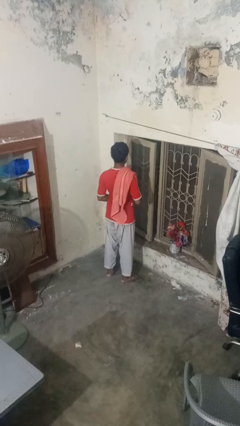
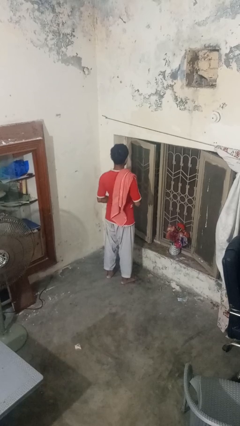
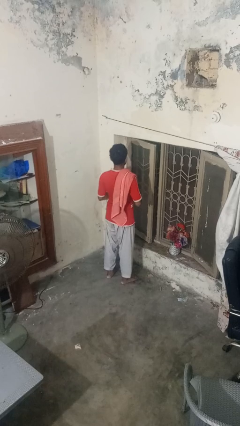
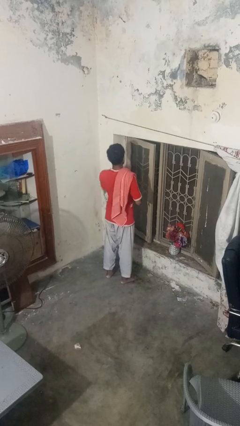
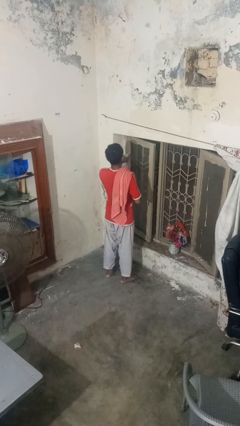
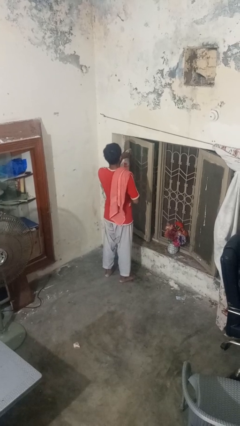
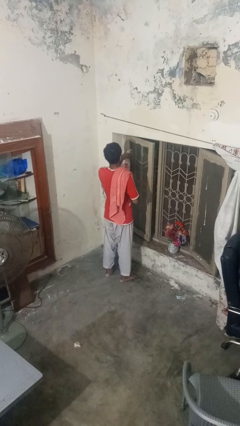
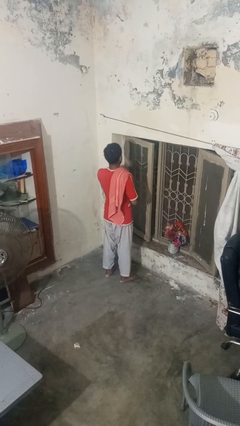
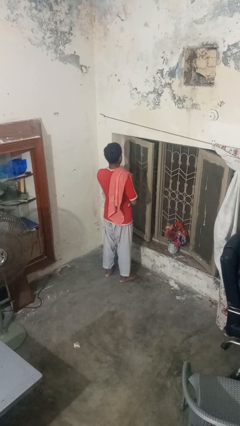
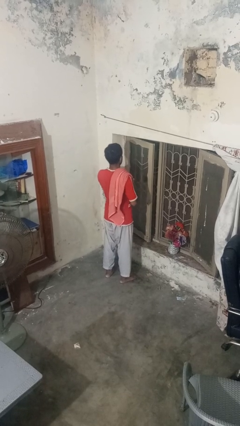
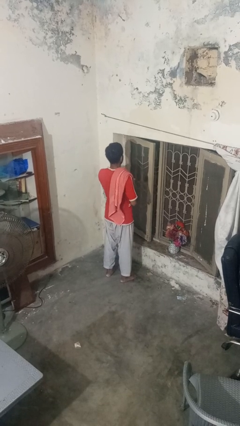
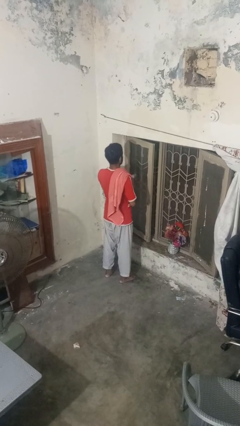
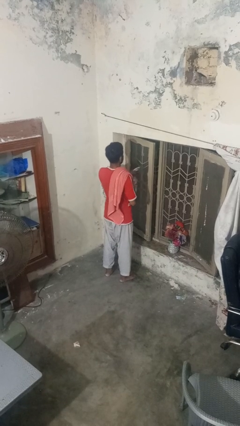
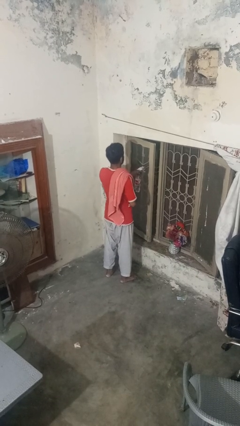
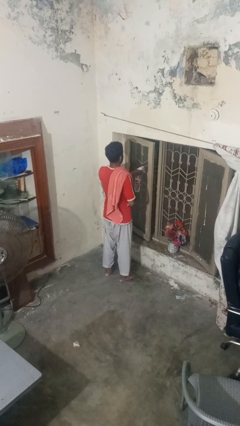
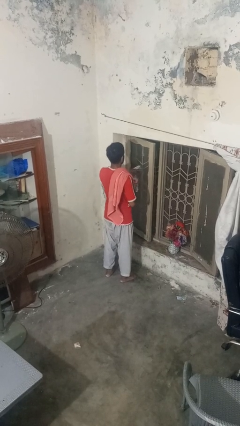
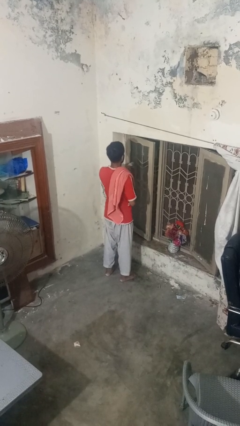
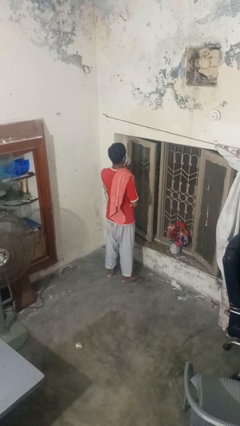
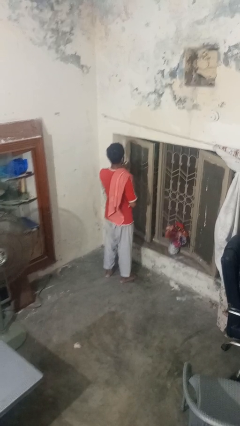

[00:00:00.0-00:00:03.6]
person sprays from bottle

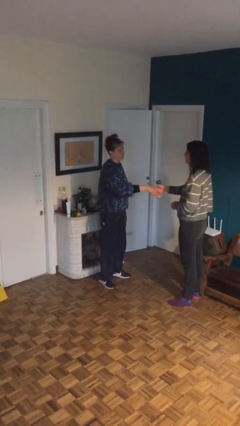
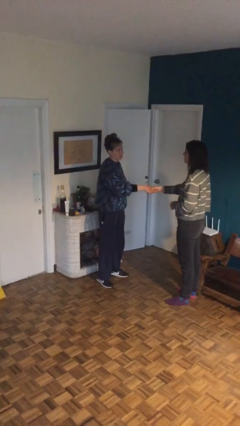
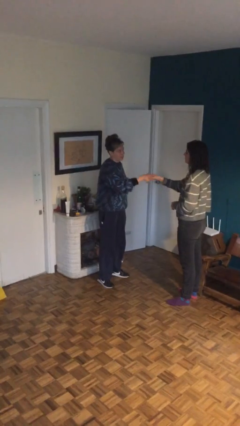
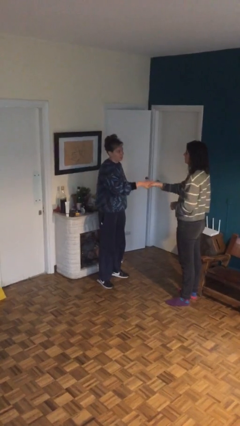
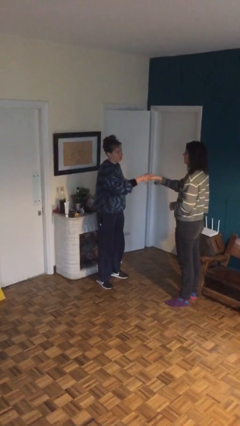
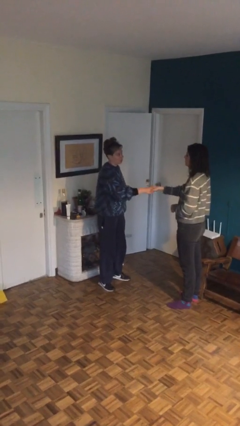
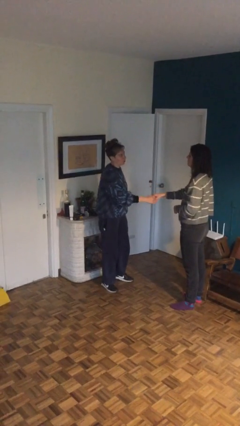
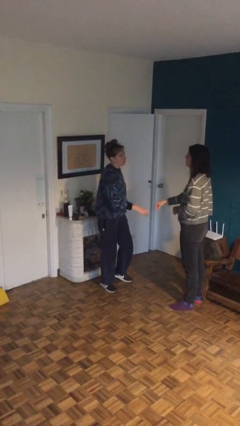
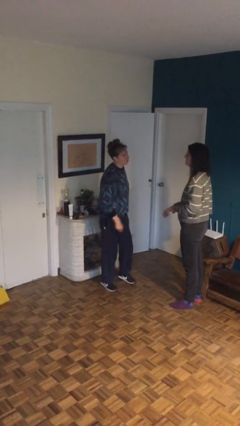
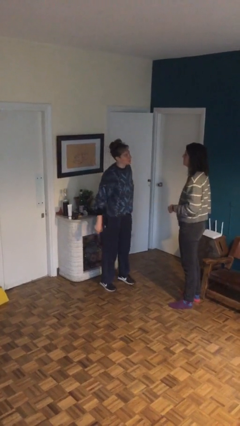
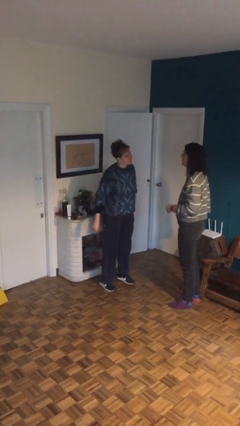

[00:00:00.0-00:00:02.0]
person shakes hand

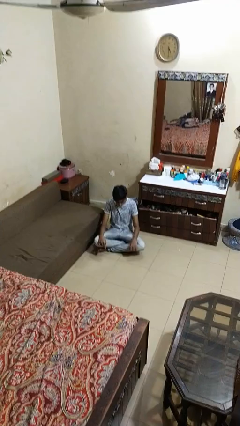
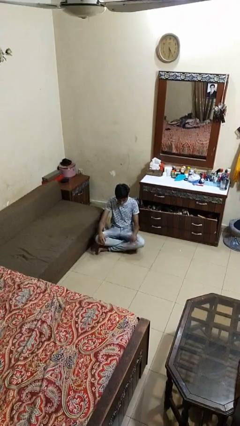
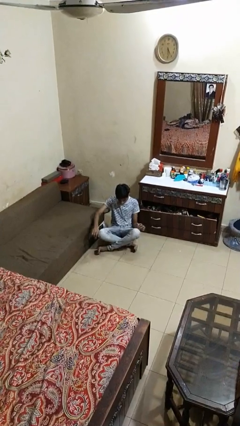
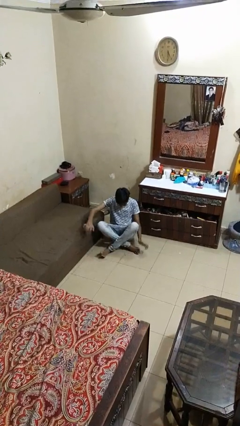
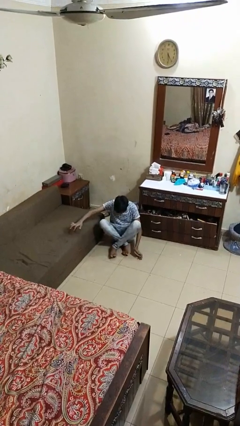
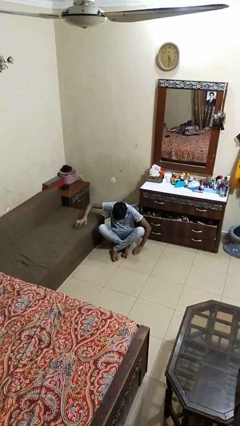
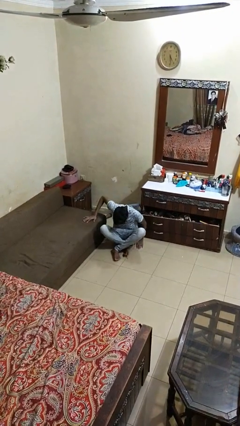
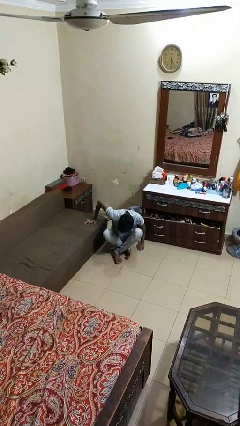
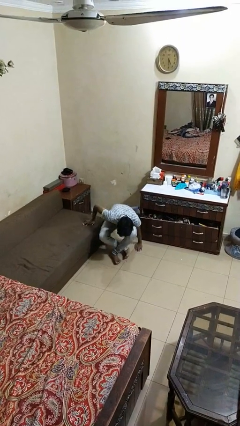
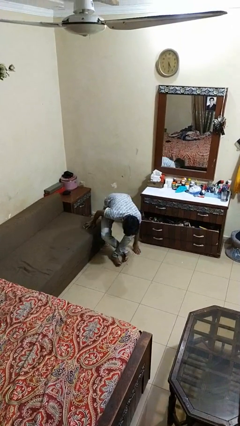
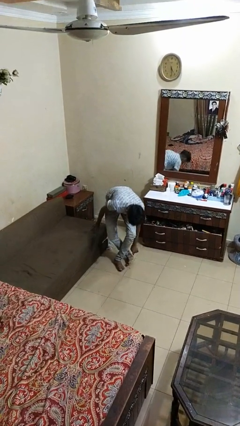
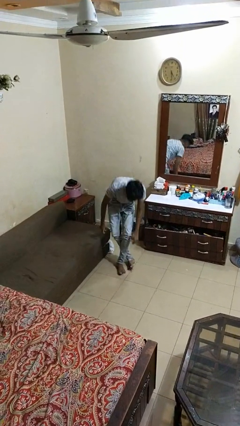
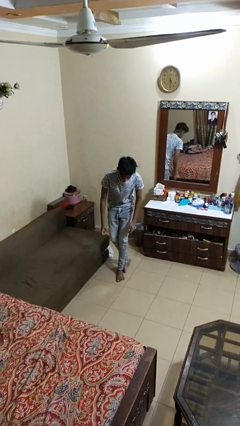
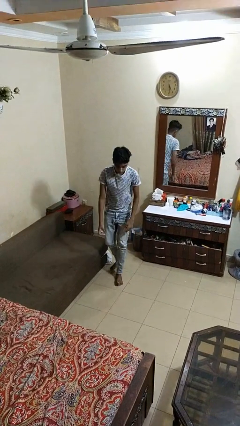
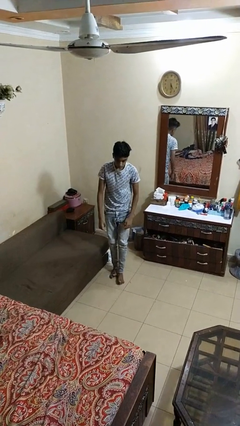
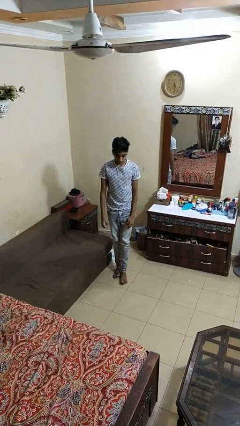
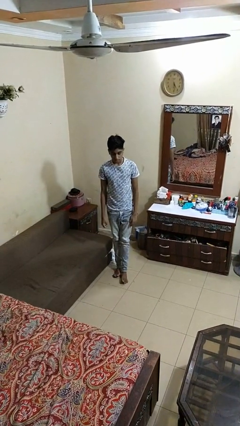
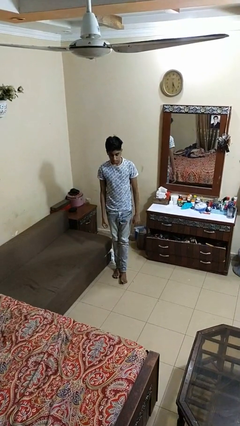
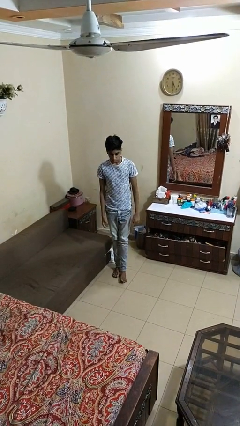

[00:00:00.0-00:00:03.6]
person stands up from floor

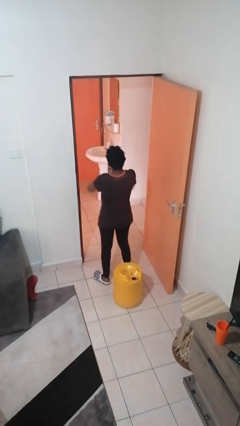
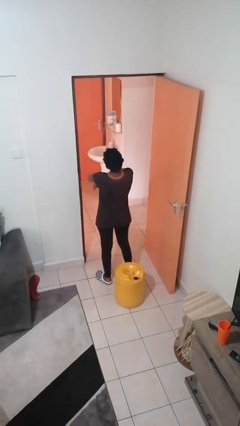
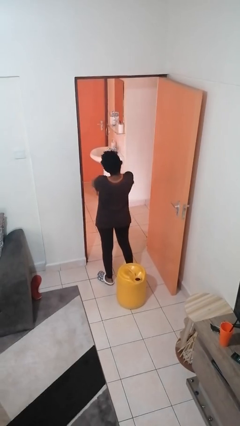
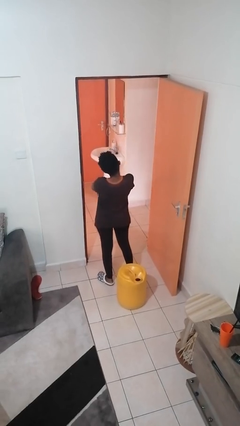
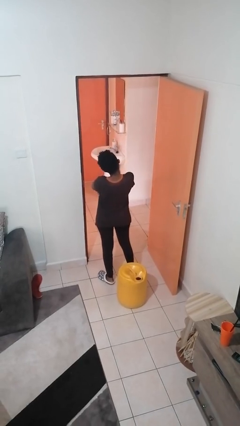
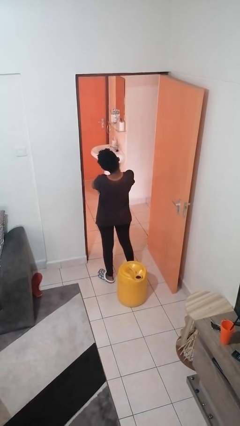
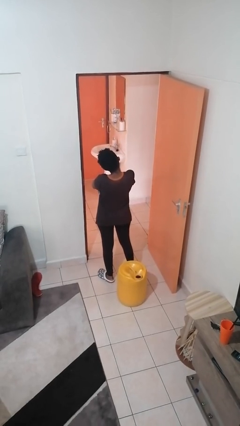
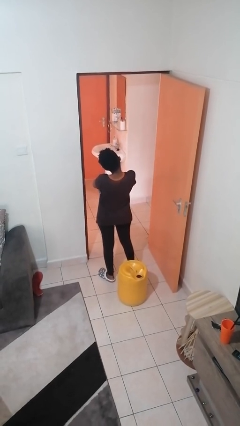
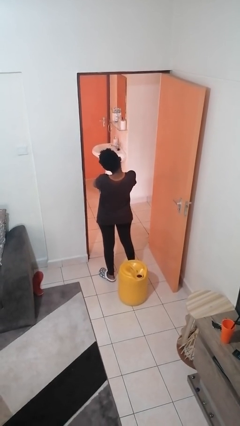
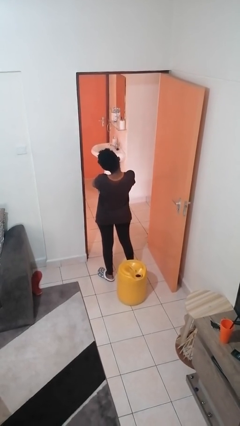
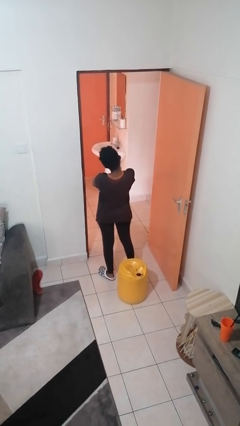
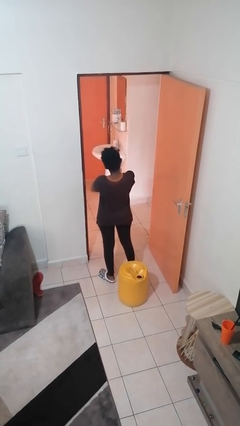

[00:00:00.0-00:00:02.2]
person crosses arms

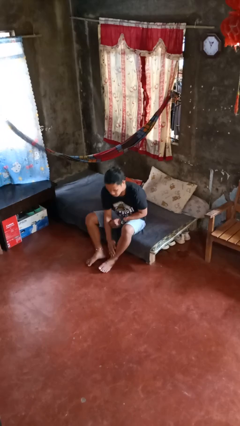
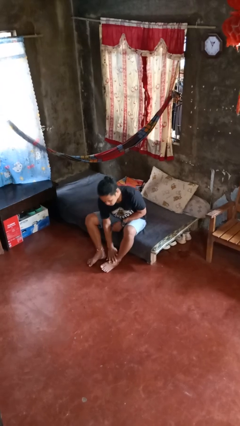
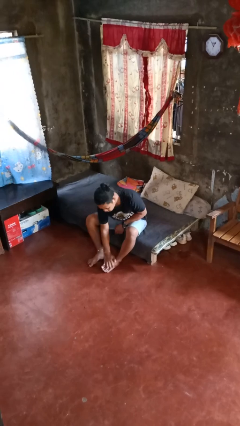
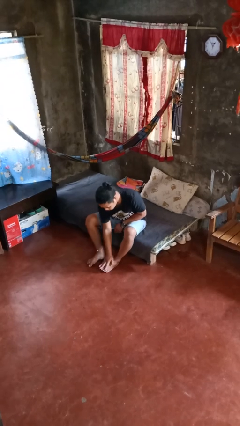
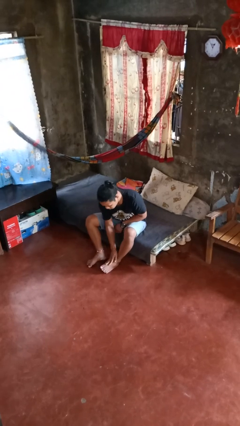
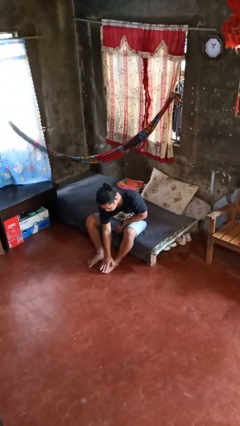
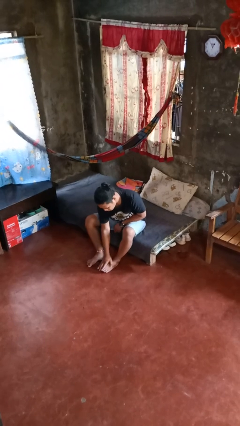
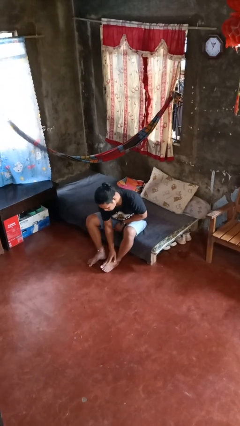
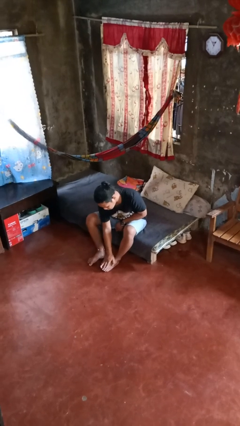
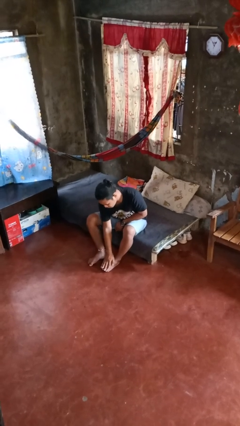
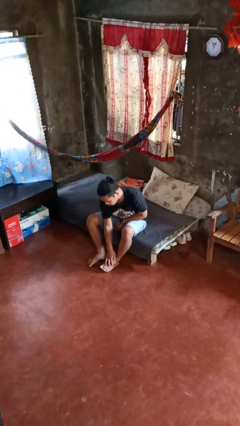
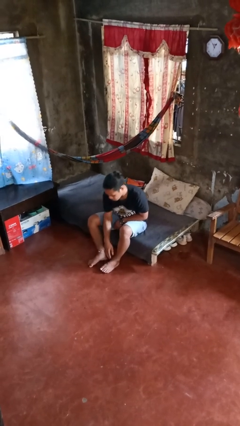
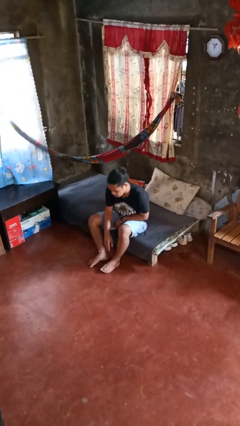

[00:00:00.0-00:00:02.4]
person rubs foot

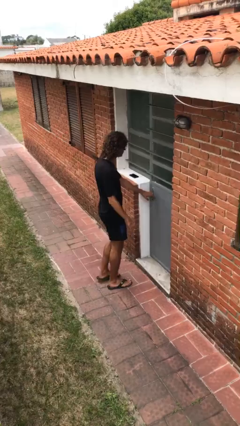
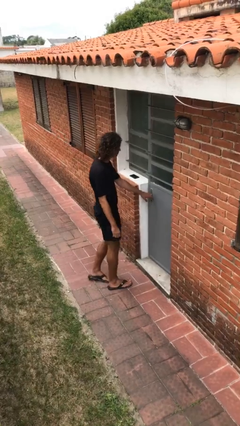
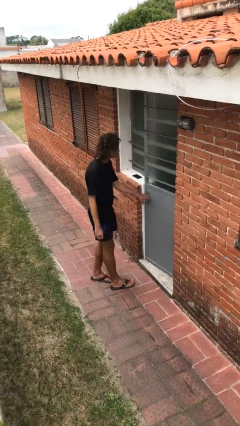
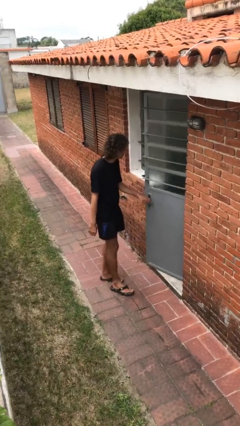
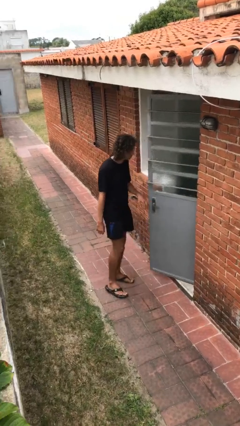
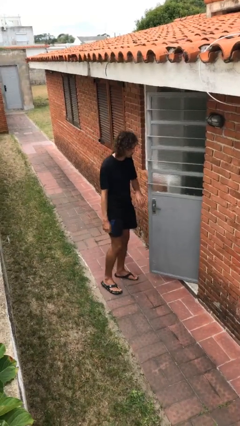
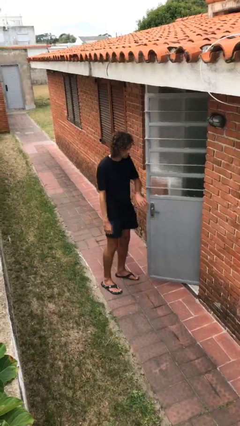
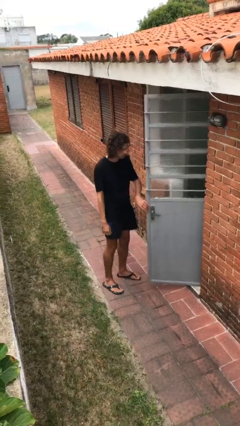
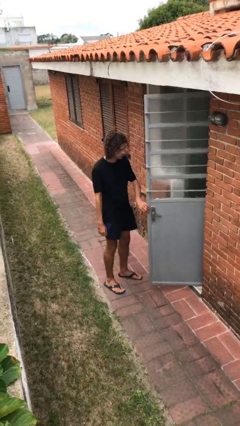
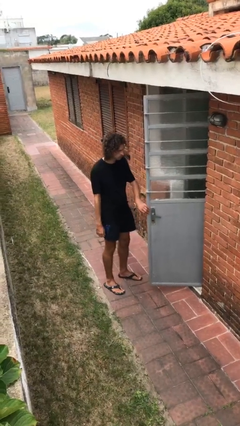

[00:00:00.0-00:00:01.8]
person opens facility door

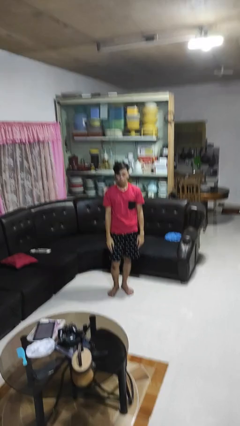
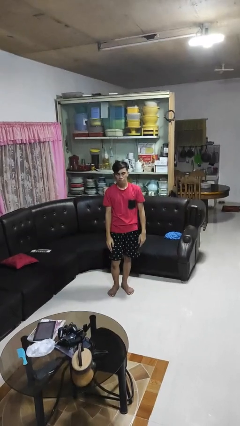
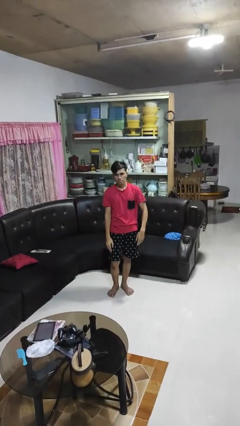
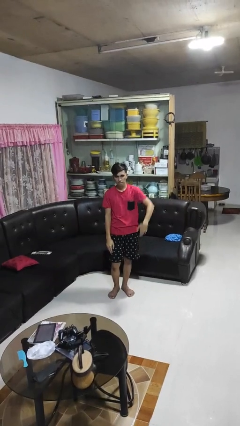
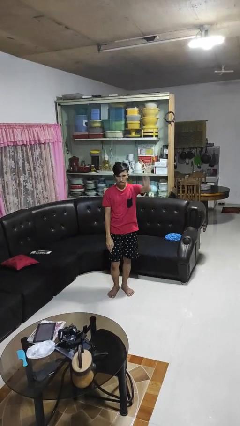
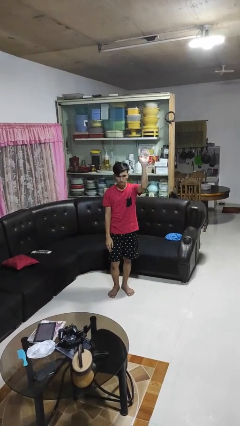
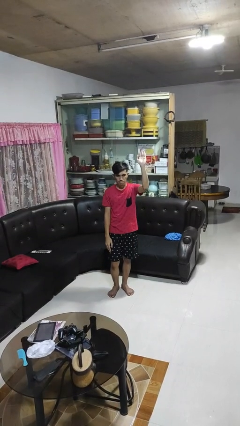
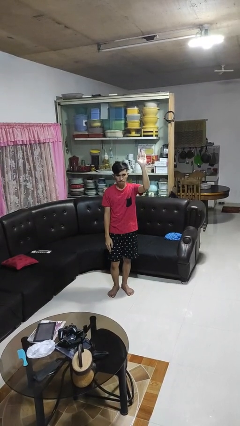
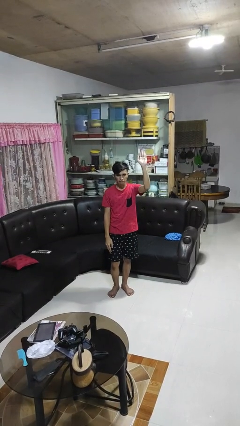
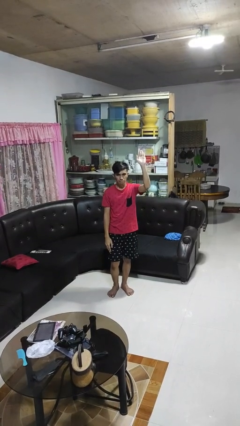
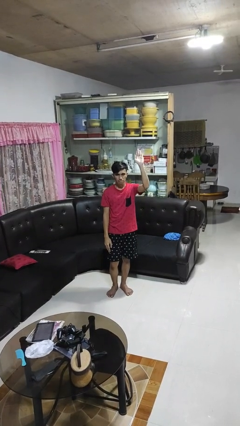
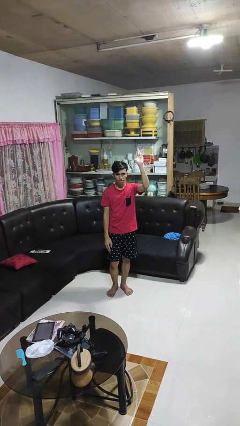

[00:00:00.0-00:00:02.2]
person gestures swipe up
